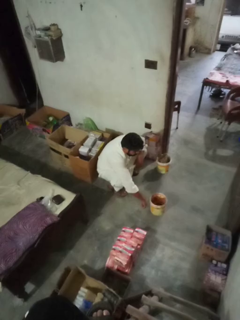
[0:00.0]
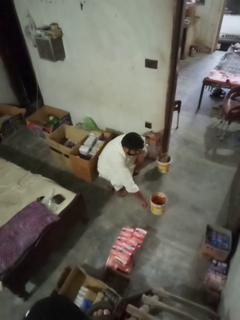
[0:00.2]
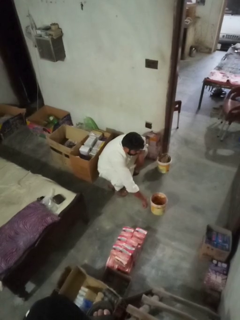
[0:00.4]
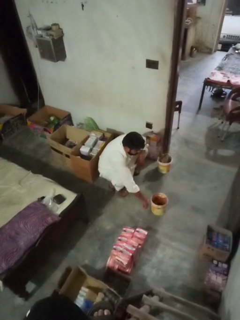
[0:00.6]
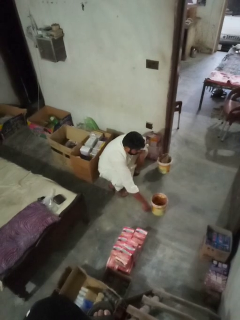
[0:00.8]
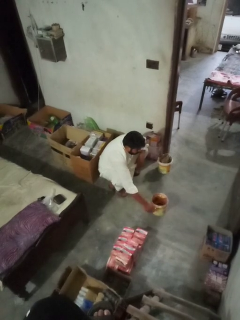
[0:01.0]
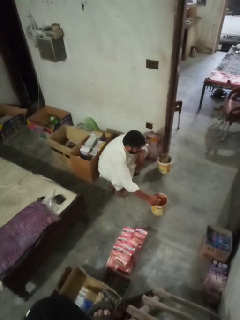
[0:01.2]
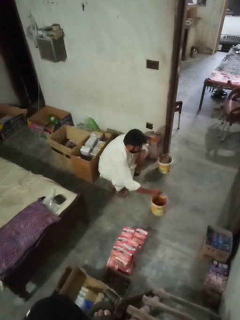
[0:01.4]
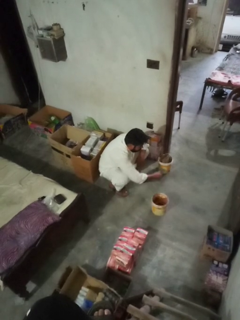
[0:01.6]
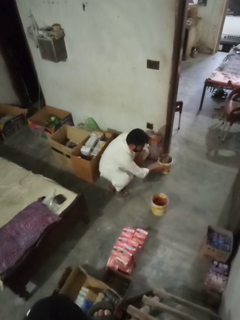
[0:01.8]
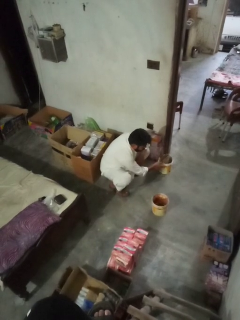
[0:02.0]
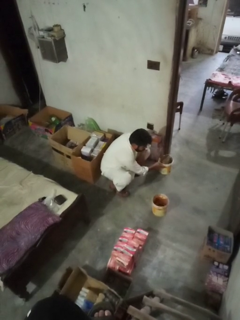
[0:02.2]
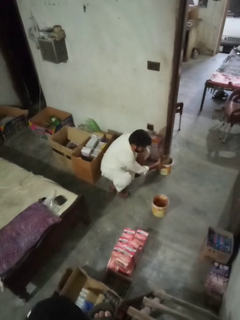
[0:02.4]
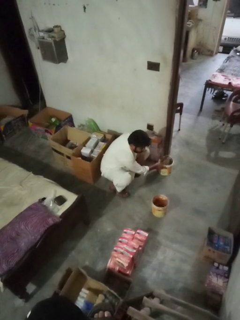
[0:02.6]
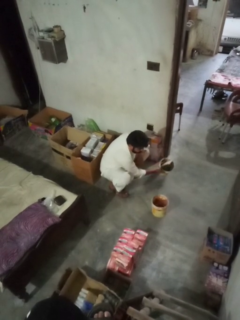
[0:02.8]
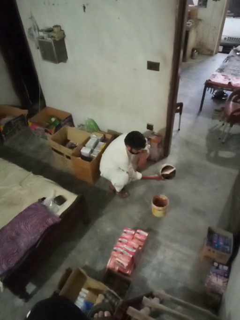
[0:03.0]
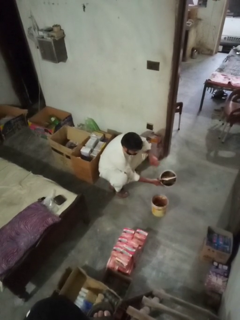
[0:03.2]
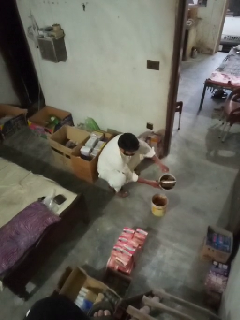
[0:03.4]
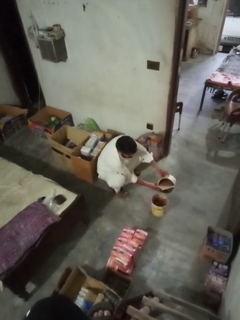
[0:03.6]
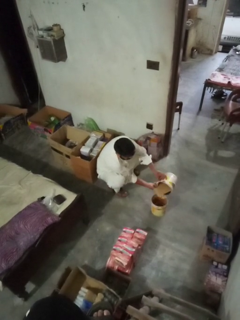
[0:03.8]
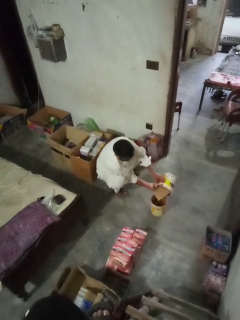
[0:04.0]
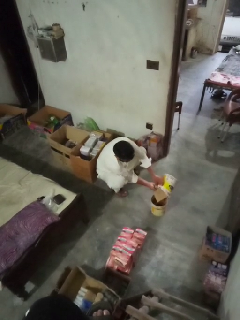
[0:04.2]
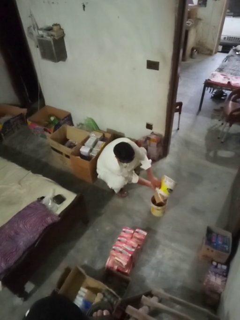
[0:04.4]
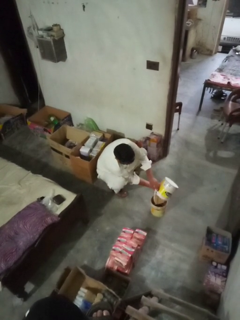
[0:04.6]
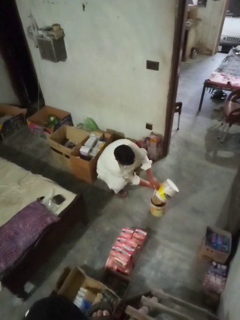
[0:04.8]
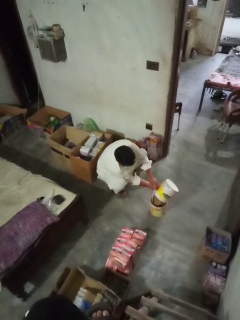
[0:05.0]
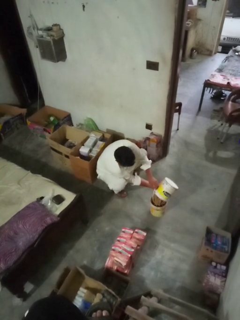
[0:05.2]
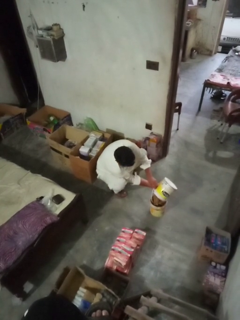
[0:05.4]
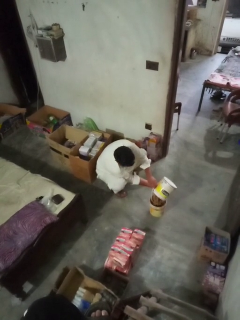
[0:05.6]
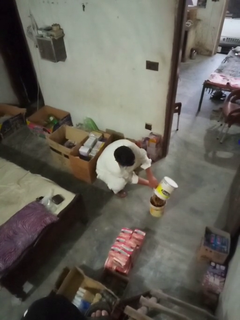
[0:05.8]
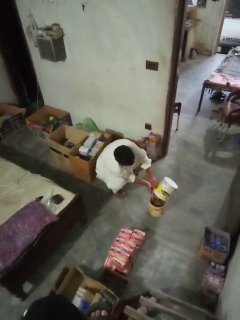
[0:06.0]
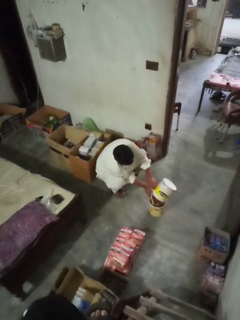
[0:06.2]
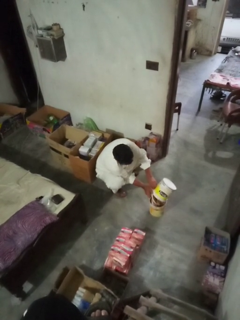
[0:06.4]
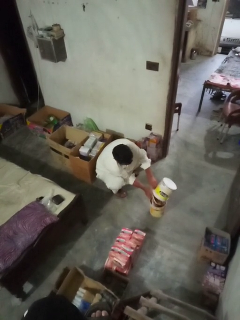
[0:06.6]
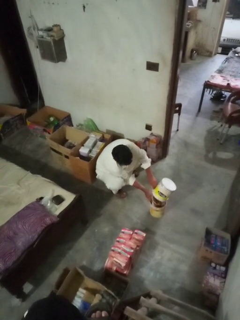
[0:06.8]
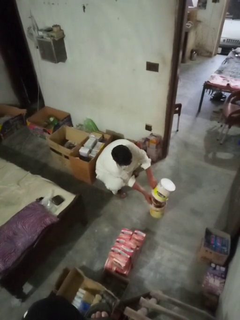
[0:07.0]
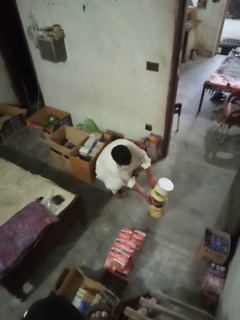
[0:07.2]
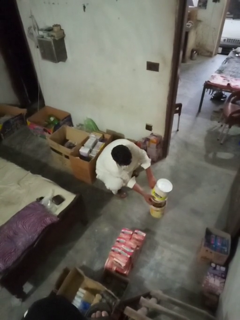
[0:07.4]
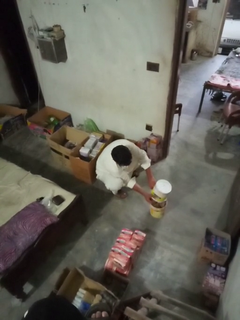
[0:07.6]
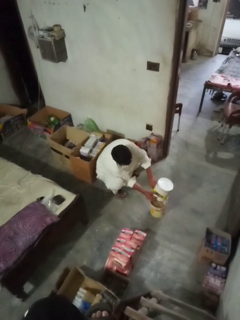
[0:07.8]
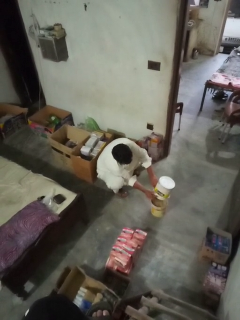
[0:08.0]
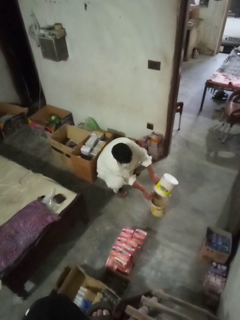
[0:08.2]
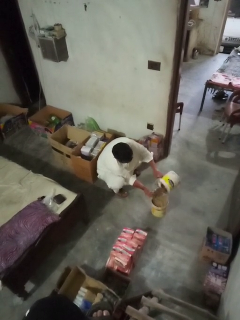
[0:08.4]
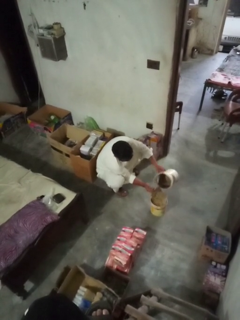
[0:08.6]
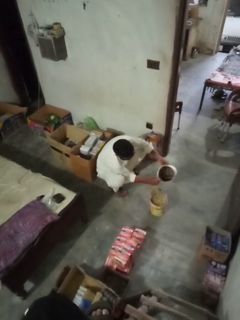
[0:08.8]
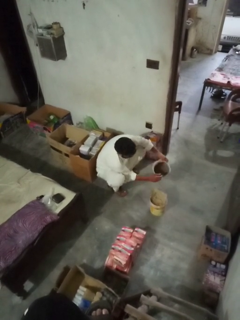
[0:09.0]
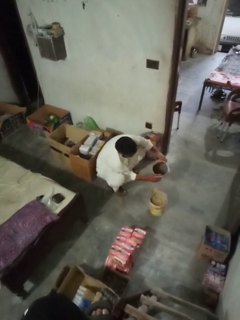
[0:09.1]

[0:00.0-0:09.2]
person removes trashbag from trashcan

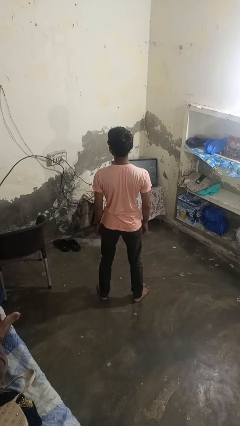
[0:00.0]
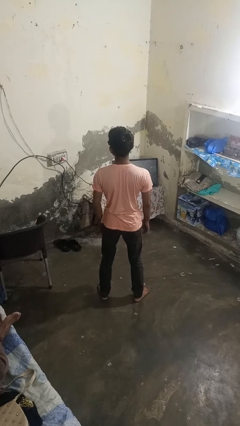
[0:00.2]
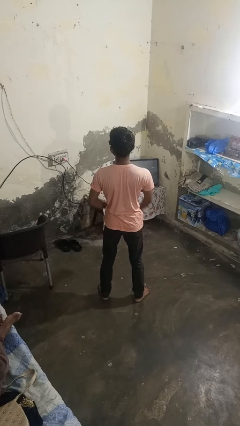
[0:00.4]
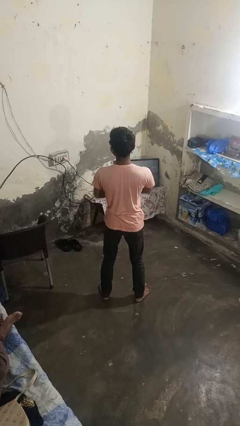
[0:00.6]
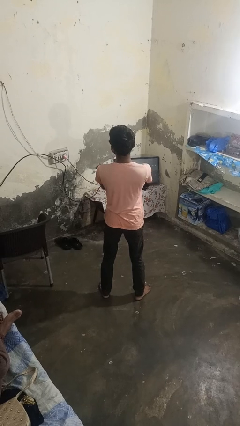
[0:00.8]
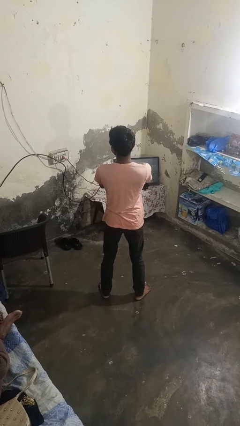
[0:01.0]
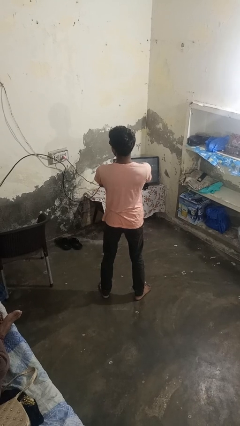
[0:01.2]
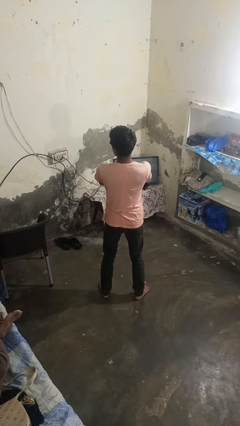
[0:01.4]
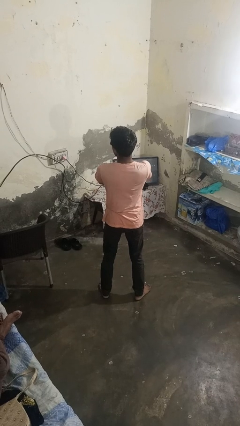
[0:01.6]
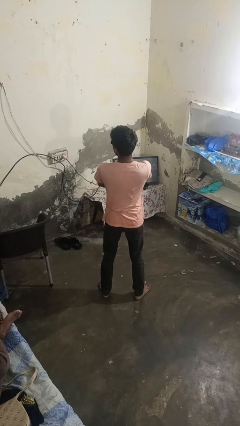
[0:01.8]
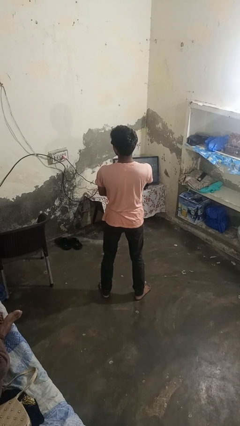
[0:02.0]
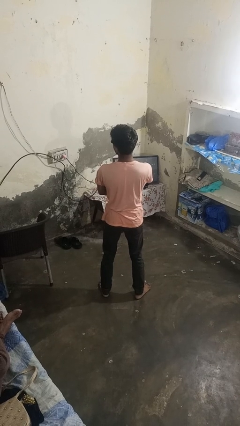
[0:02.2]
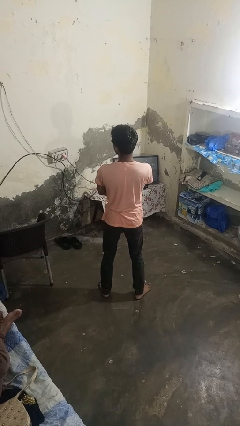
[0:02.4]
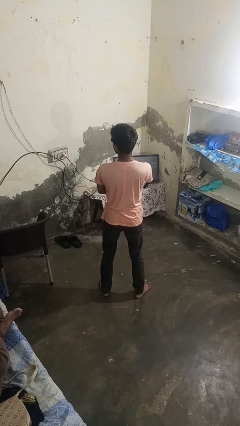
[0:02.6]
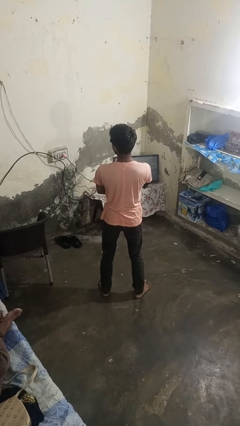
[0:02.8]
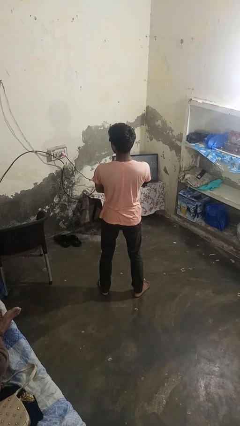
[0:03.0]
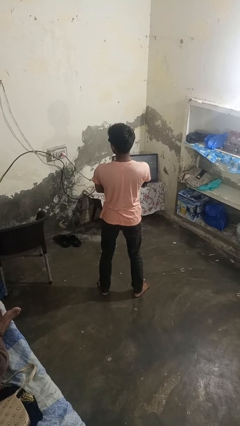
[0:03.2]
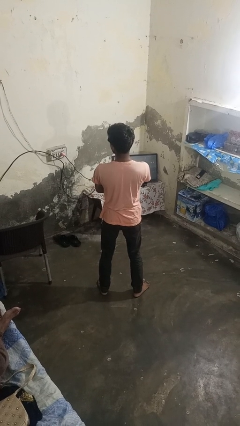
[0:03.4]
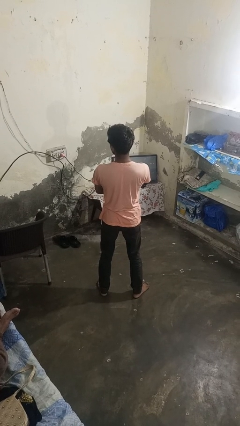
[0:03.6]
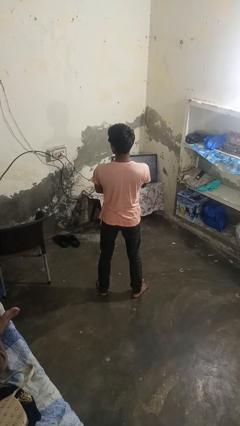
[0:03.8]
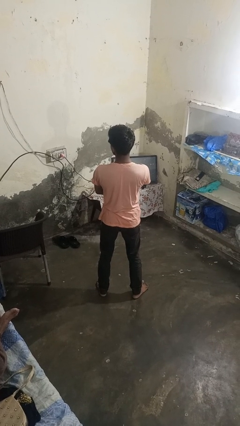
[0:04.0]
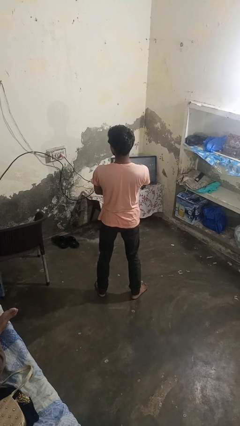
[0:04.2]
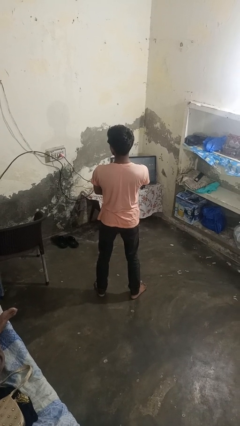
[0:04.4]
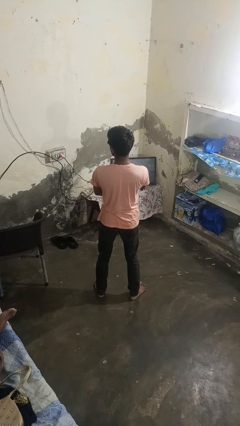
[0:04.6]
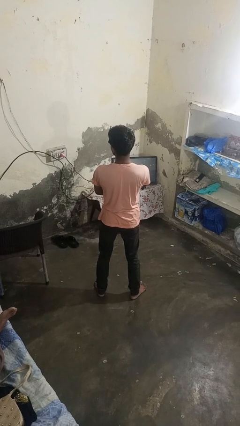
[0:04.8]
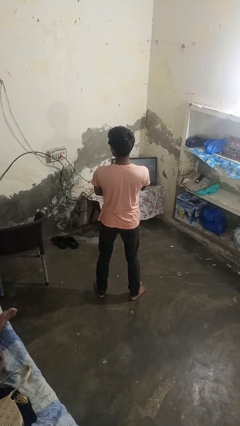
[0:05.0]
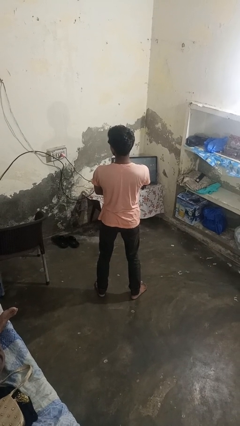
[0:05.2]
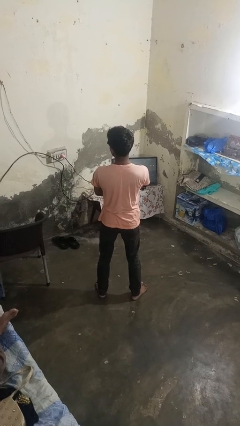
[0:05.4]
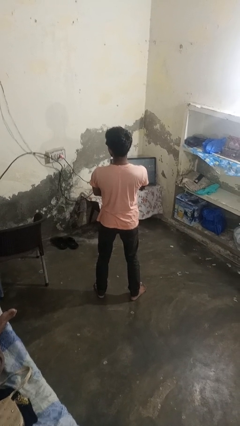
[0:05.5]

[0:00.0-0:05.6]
person crosses arms

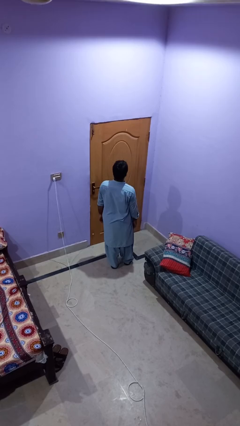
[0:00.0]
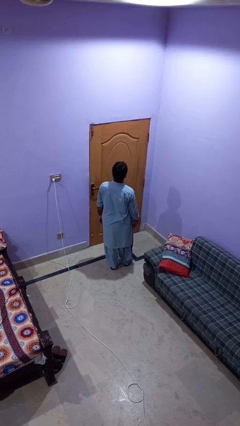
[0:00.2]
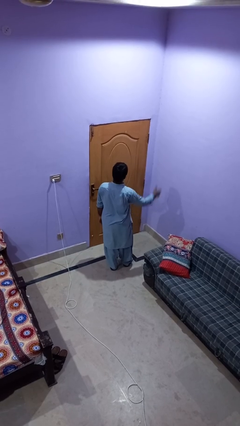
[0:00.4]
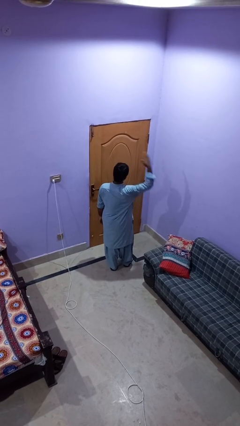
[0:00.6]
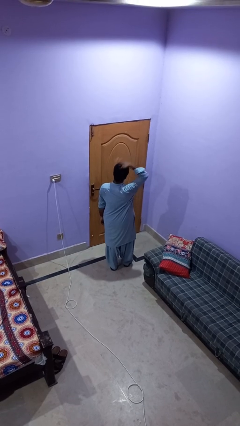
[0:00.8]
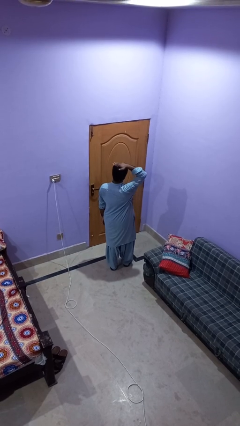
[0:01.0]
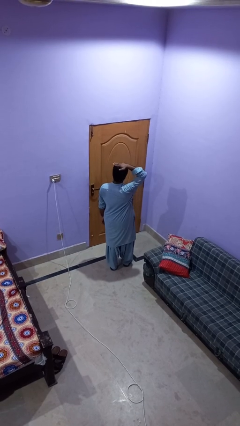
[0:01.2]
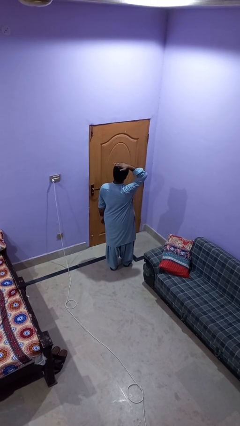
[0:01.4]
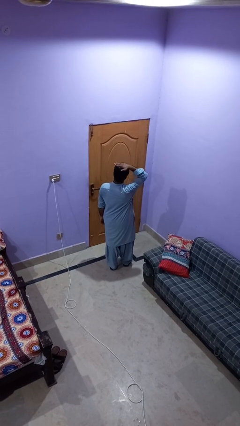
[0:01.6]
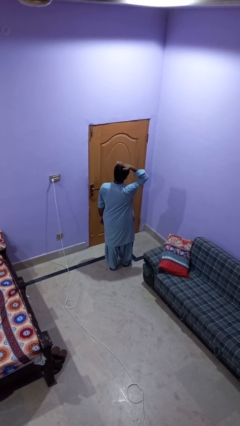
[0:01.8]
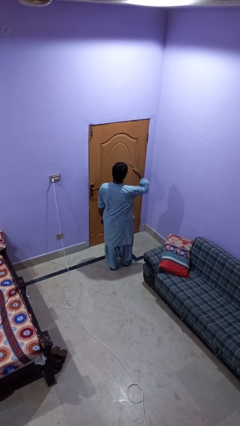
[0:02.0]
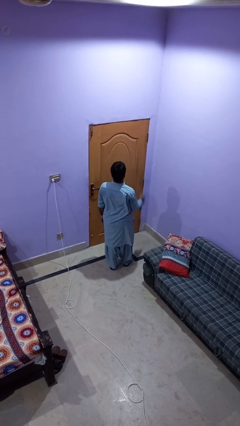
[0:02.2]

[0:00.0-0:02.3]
person pats head

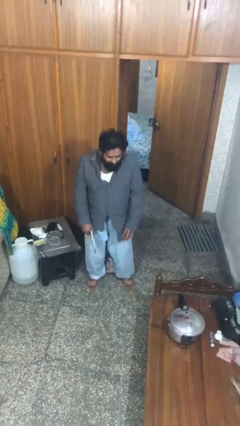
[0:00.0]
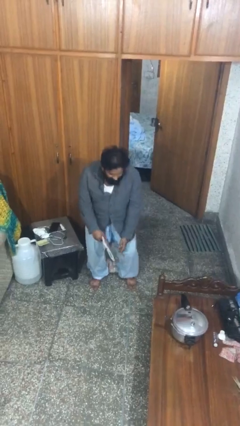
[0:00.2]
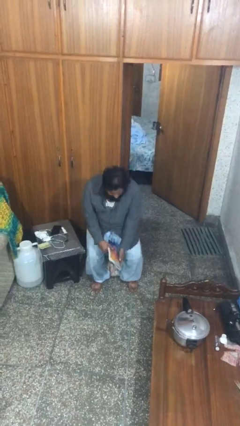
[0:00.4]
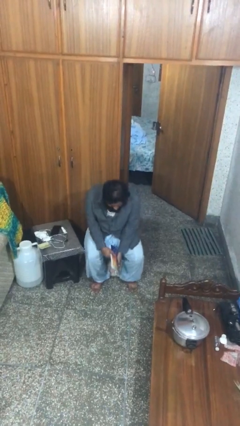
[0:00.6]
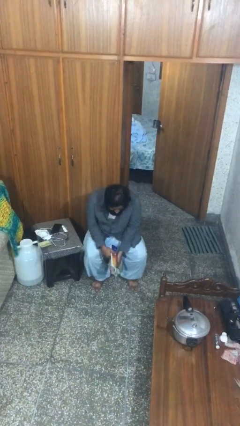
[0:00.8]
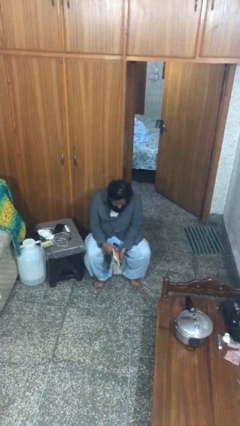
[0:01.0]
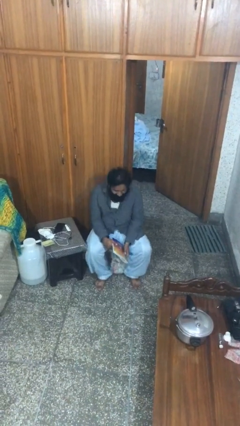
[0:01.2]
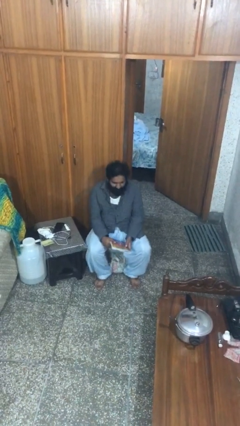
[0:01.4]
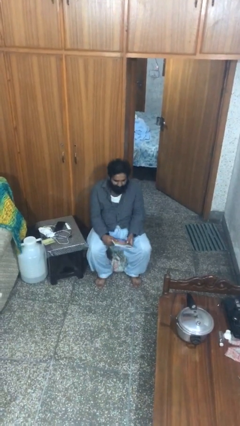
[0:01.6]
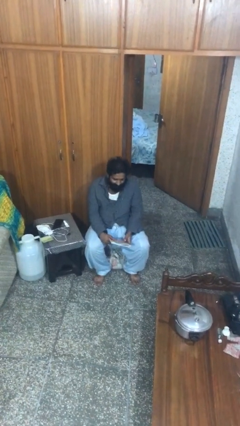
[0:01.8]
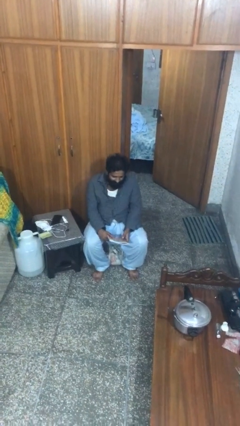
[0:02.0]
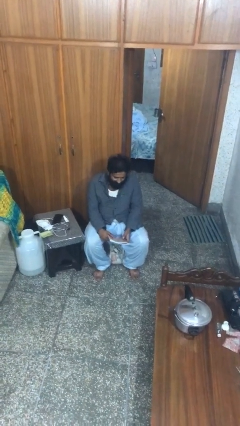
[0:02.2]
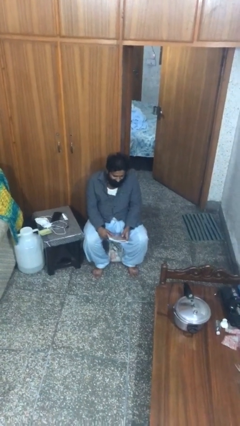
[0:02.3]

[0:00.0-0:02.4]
person sits down

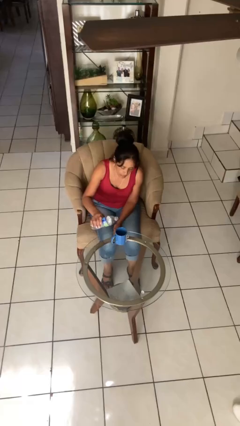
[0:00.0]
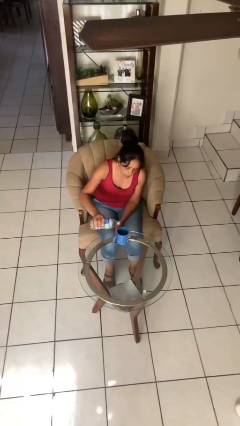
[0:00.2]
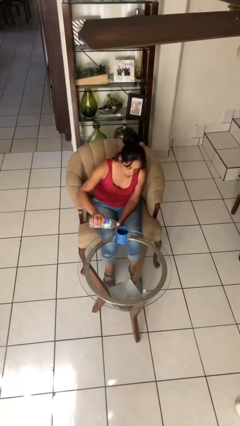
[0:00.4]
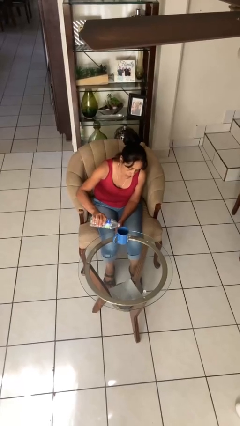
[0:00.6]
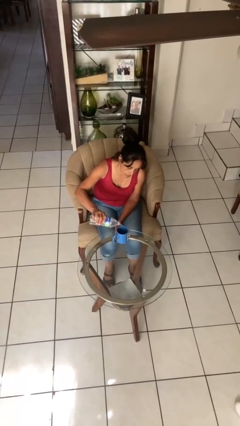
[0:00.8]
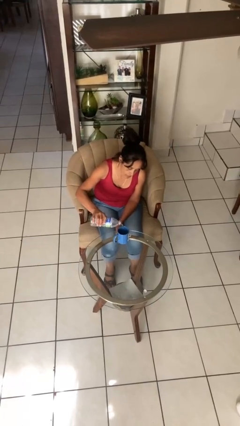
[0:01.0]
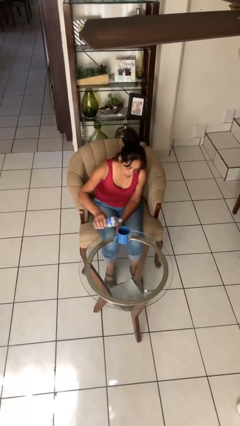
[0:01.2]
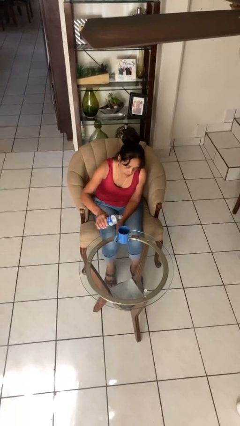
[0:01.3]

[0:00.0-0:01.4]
person pours liquid into cup
